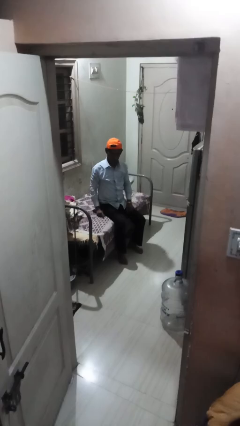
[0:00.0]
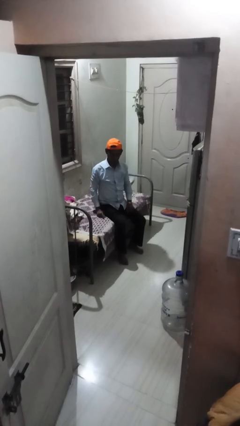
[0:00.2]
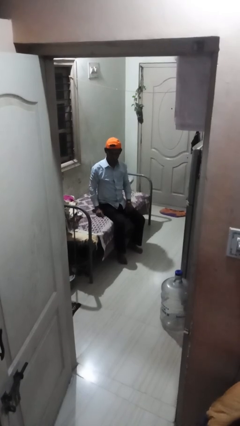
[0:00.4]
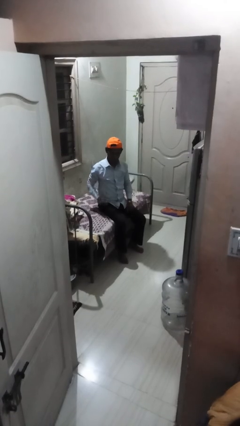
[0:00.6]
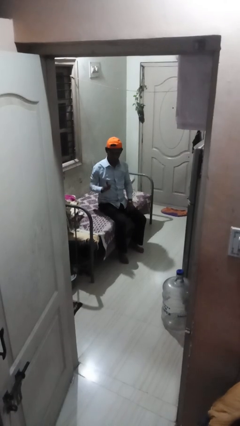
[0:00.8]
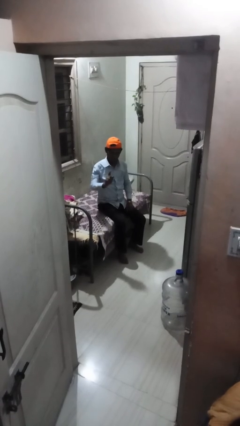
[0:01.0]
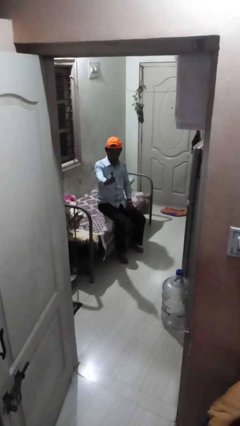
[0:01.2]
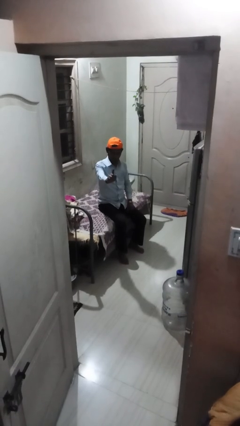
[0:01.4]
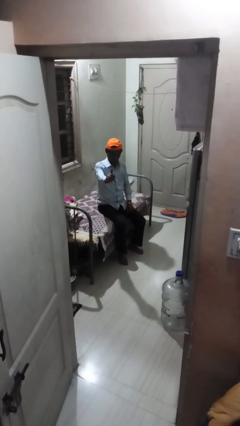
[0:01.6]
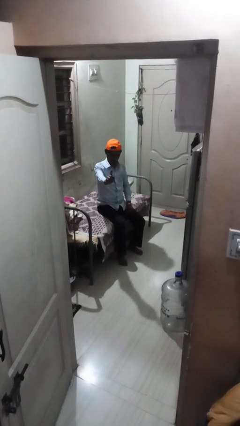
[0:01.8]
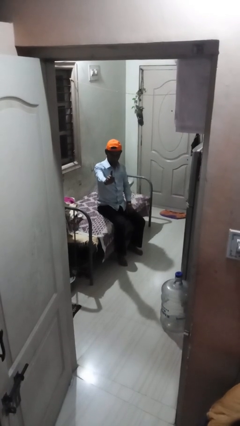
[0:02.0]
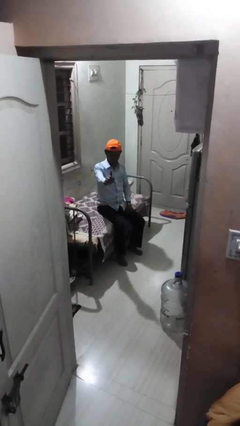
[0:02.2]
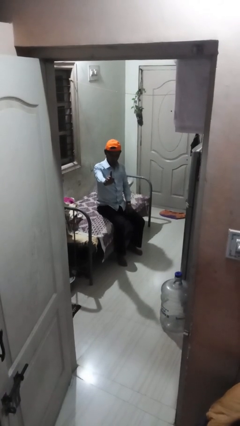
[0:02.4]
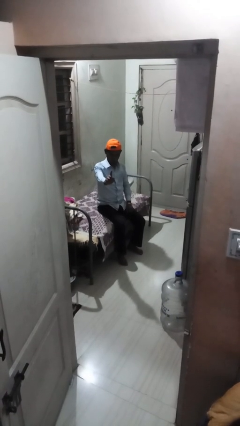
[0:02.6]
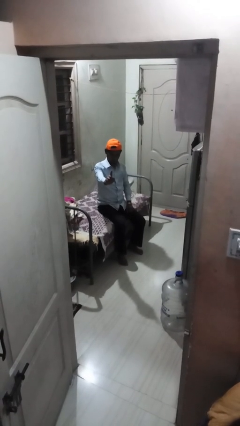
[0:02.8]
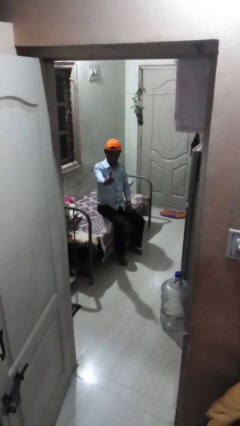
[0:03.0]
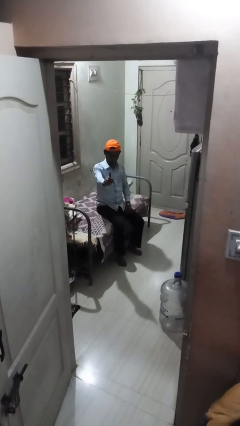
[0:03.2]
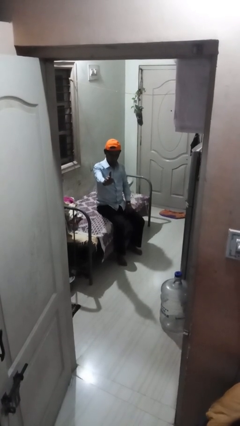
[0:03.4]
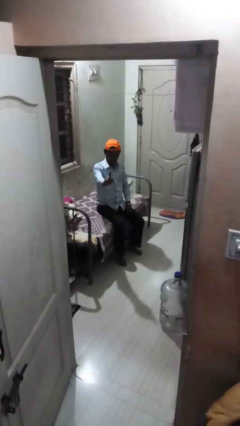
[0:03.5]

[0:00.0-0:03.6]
person gestures number one

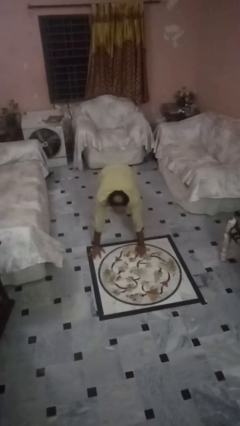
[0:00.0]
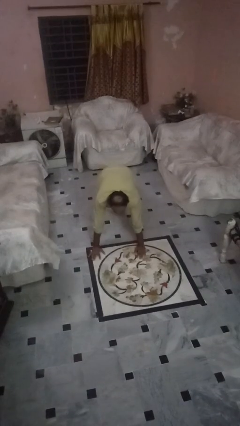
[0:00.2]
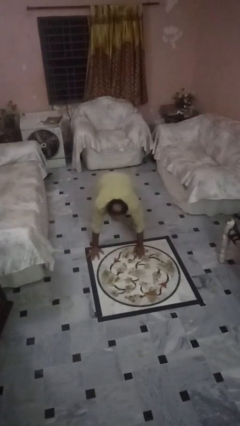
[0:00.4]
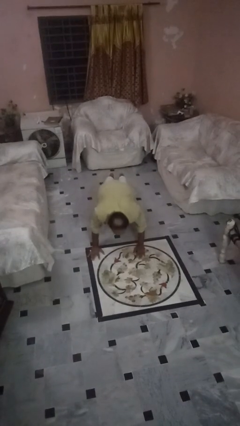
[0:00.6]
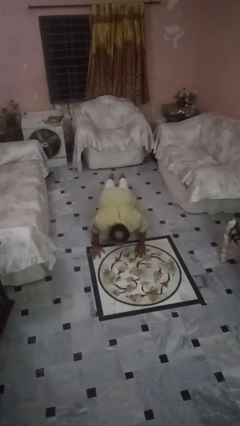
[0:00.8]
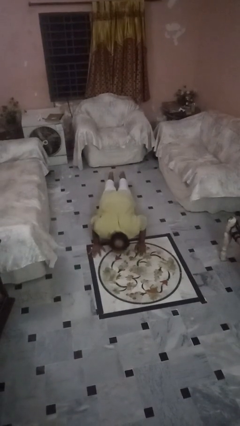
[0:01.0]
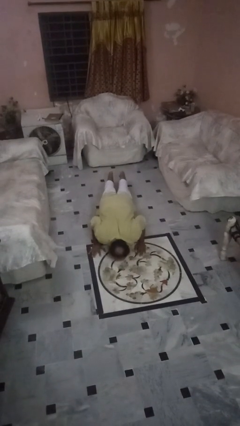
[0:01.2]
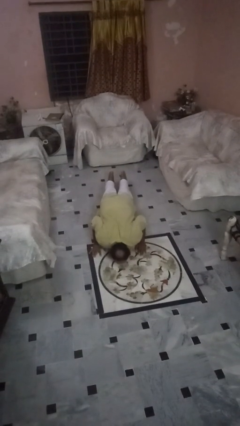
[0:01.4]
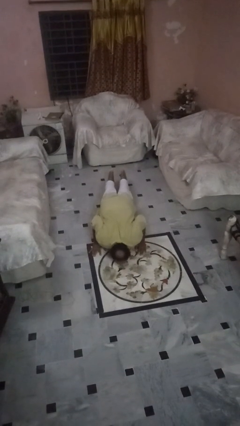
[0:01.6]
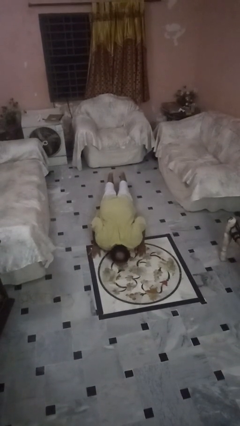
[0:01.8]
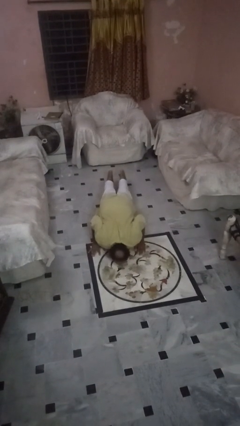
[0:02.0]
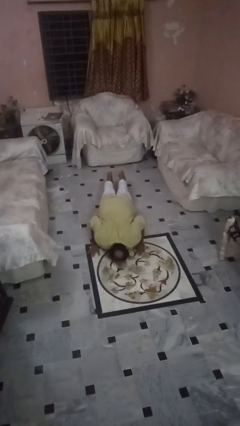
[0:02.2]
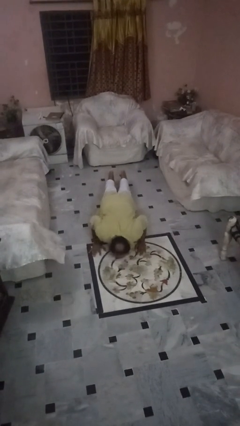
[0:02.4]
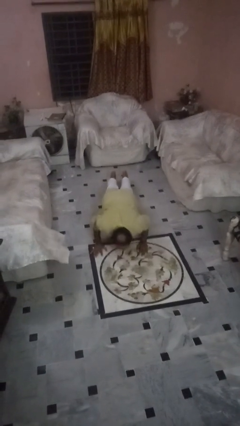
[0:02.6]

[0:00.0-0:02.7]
person exercises with pushup

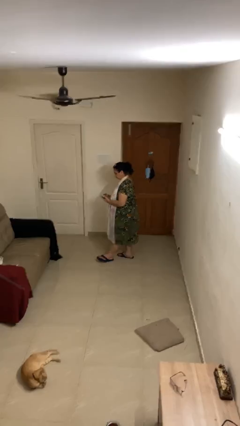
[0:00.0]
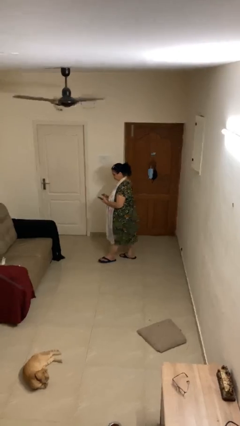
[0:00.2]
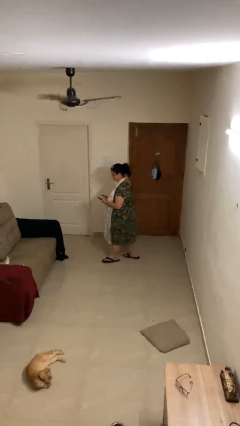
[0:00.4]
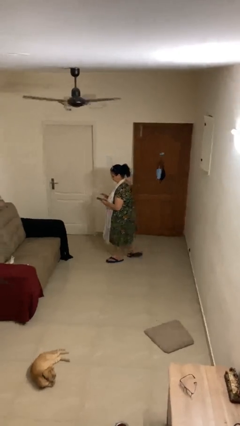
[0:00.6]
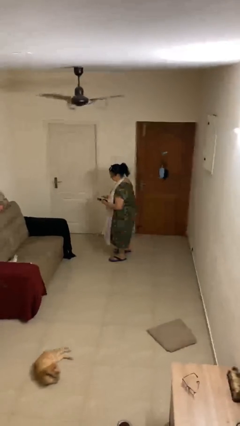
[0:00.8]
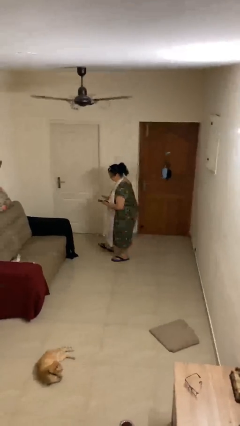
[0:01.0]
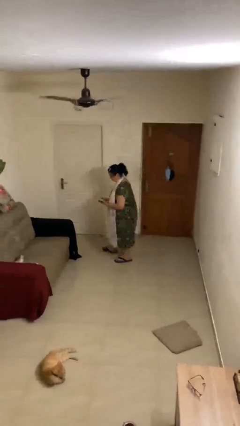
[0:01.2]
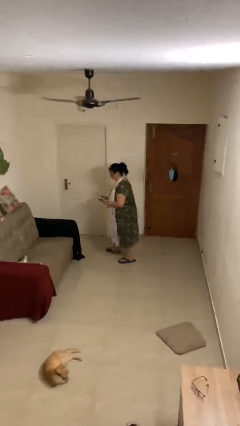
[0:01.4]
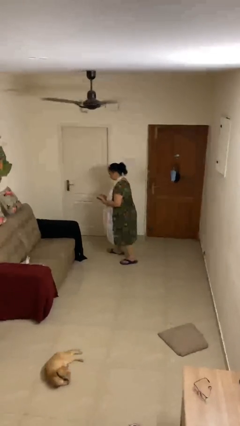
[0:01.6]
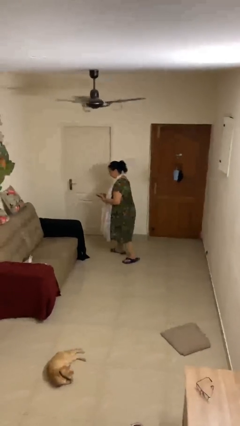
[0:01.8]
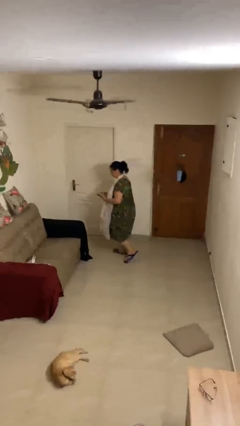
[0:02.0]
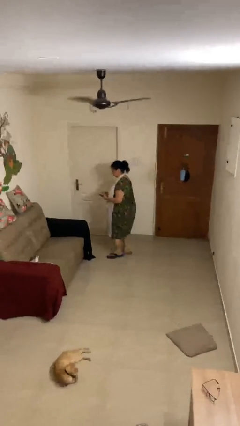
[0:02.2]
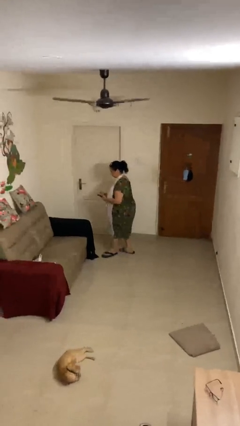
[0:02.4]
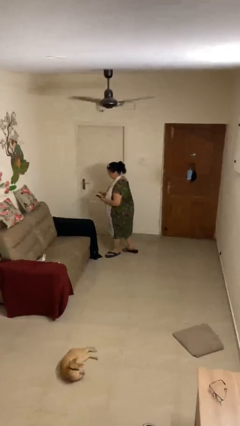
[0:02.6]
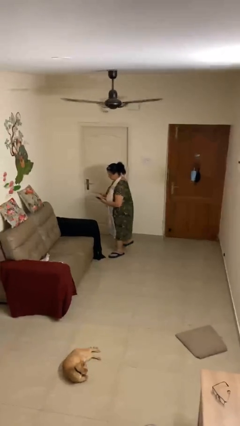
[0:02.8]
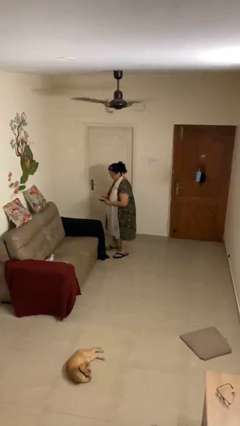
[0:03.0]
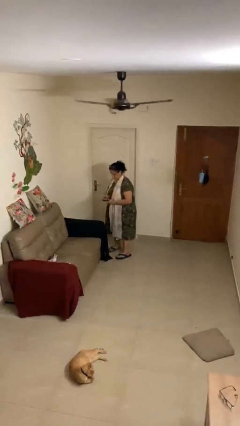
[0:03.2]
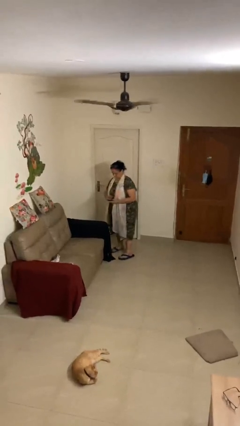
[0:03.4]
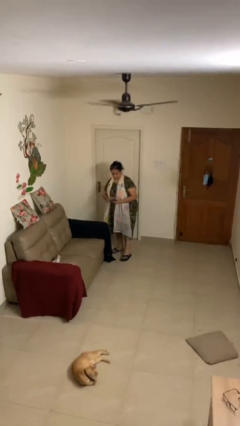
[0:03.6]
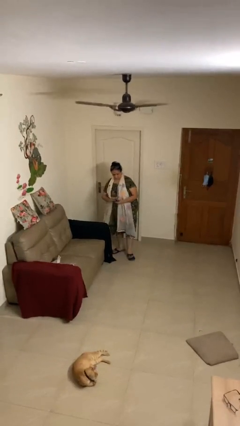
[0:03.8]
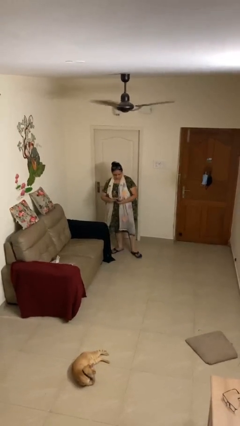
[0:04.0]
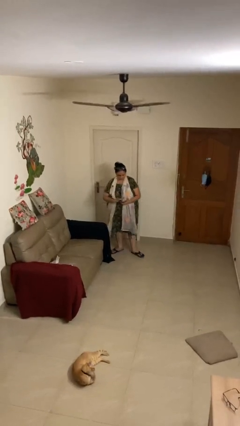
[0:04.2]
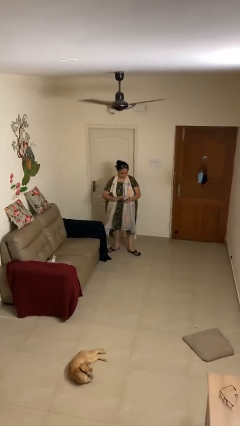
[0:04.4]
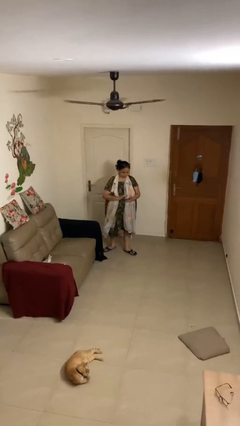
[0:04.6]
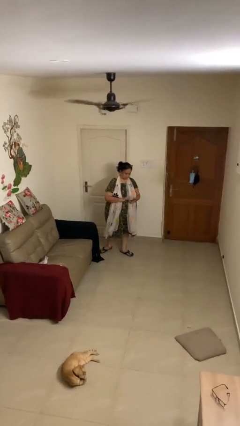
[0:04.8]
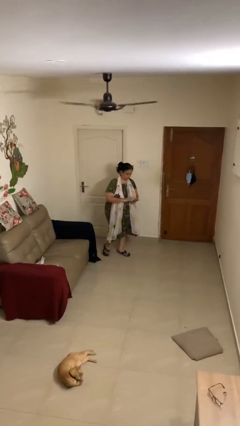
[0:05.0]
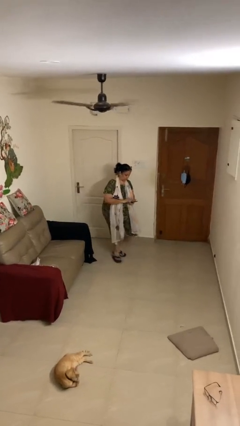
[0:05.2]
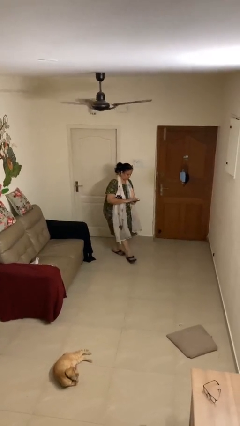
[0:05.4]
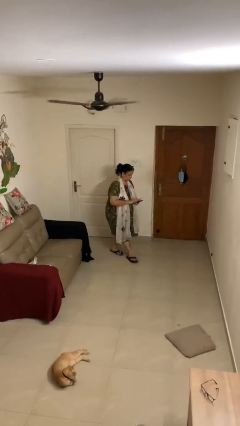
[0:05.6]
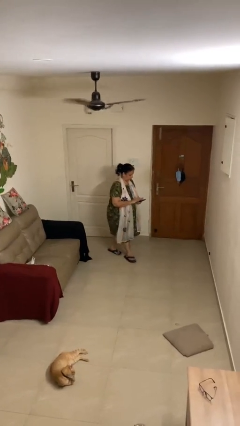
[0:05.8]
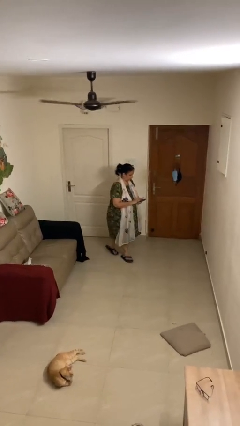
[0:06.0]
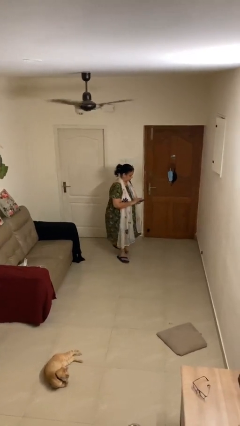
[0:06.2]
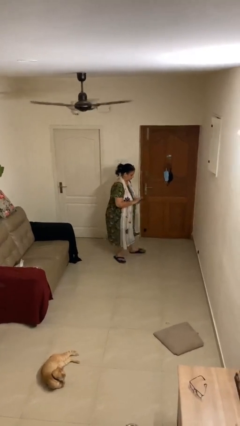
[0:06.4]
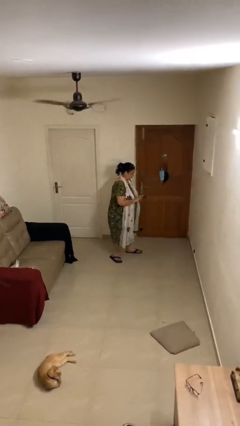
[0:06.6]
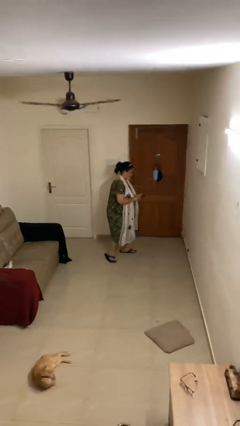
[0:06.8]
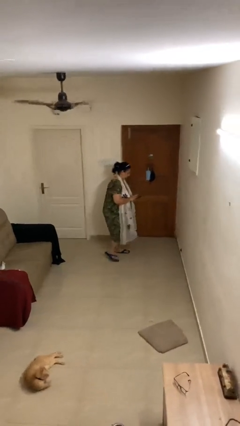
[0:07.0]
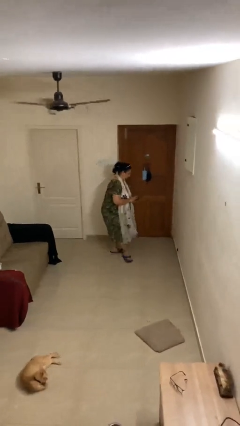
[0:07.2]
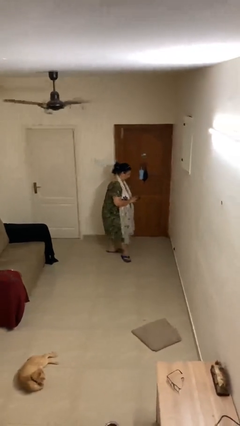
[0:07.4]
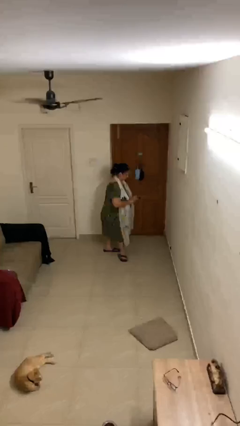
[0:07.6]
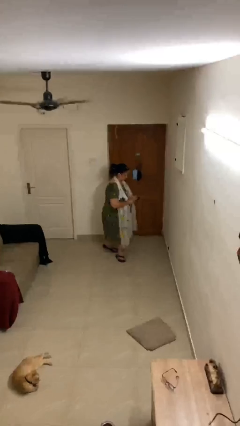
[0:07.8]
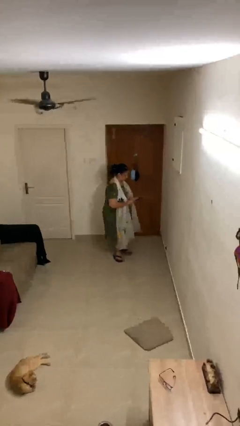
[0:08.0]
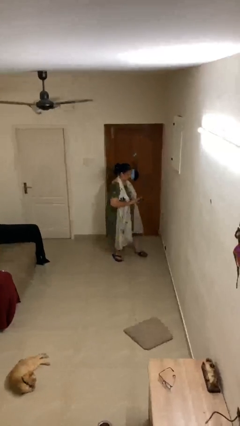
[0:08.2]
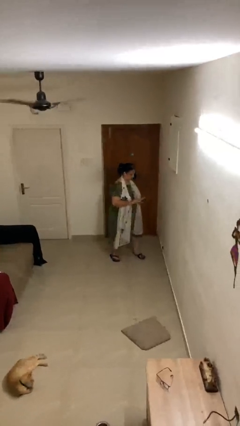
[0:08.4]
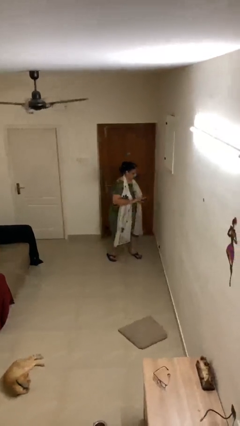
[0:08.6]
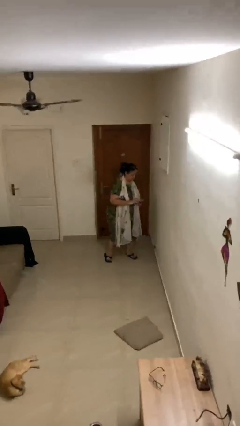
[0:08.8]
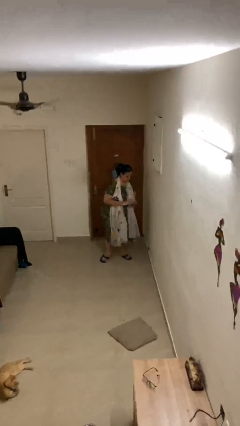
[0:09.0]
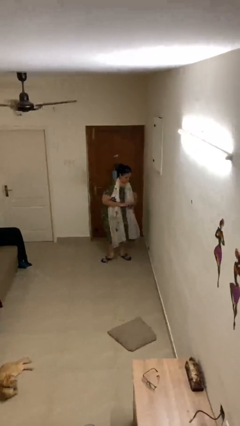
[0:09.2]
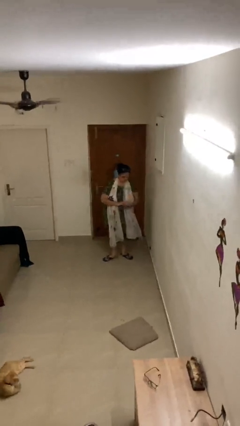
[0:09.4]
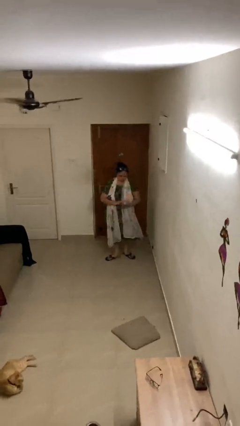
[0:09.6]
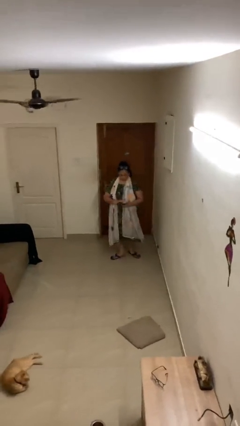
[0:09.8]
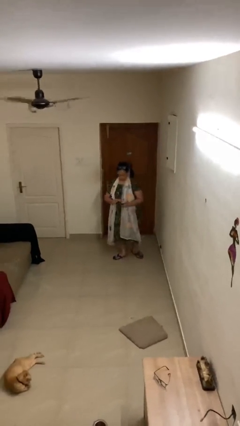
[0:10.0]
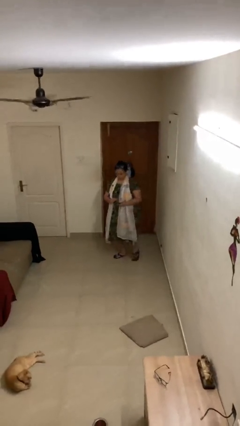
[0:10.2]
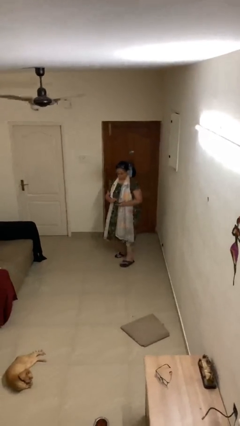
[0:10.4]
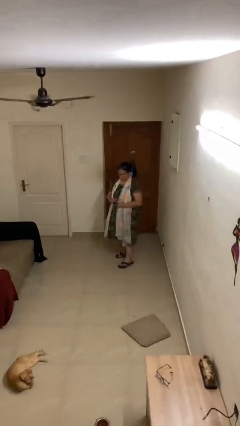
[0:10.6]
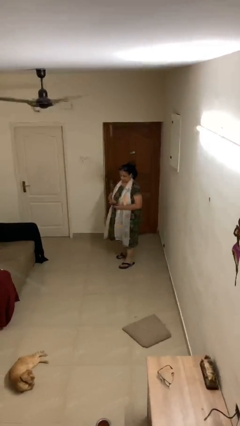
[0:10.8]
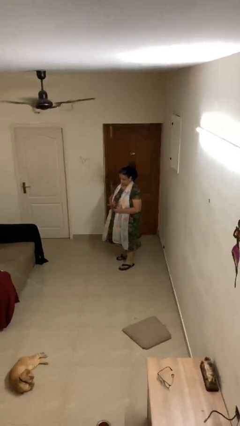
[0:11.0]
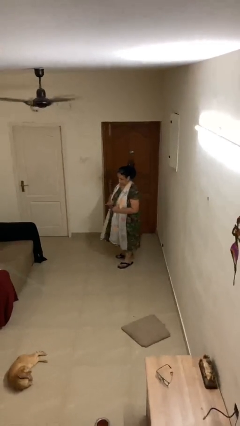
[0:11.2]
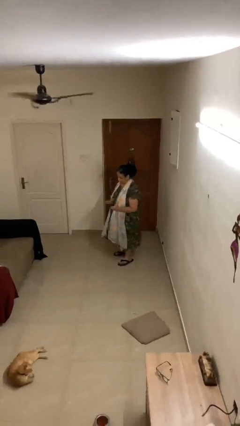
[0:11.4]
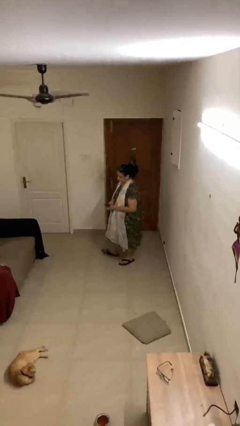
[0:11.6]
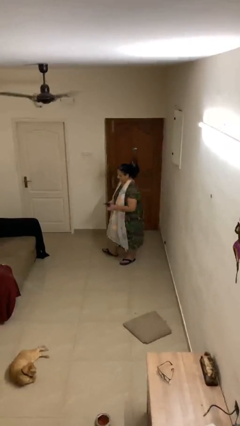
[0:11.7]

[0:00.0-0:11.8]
person texts on phone
